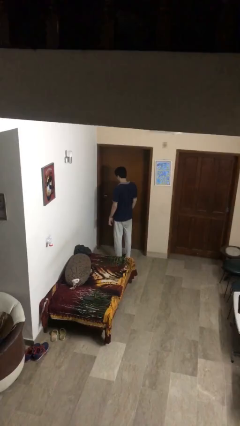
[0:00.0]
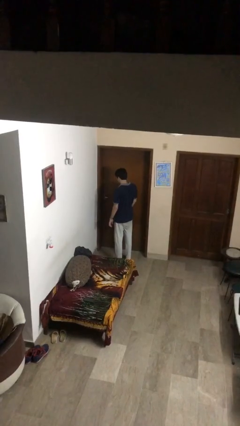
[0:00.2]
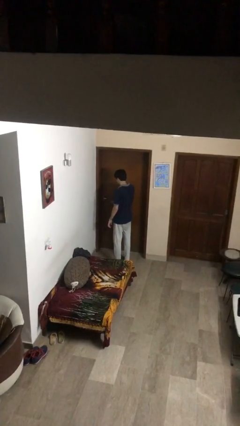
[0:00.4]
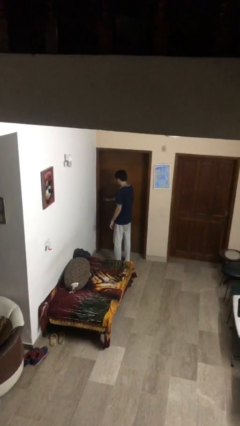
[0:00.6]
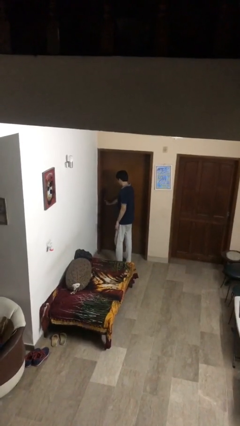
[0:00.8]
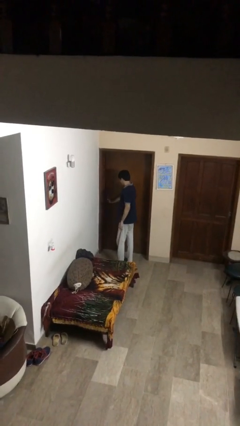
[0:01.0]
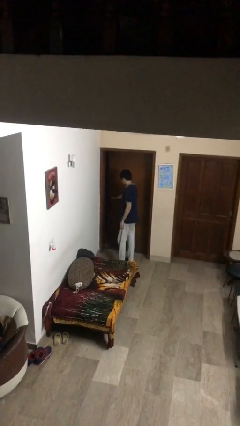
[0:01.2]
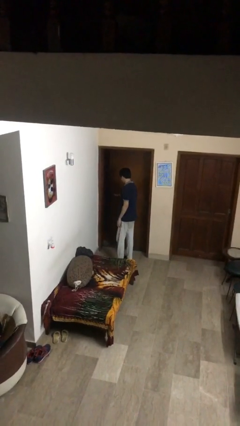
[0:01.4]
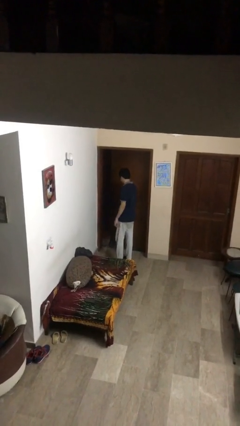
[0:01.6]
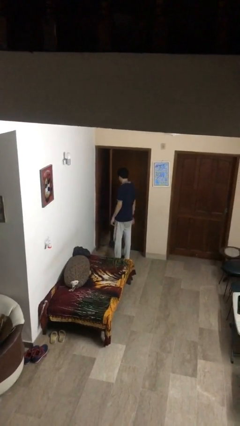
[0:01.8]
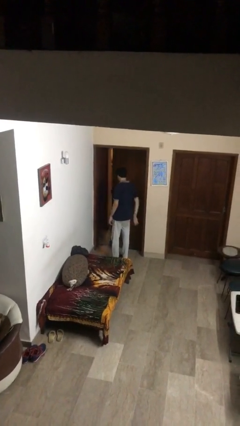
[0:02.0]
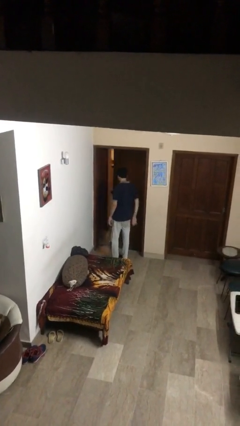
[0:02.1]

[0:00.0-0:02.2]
person opens facility door

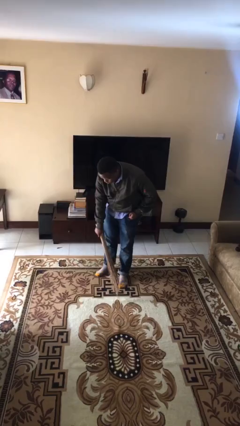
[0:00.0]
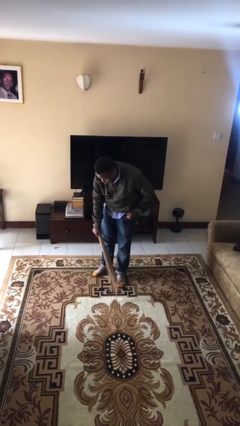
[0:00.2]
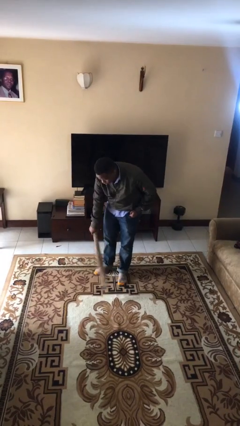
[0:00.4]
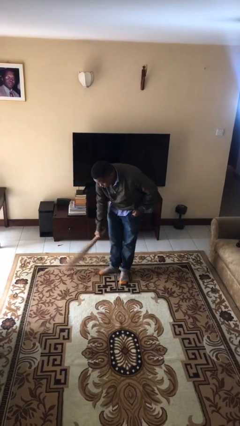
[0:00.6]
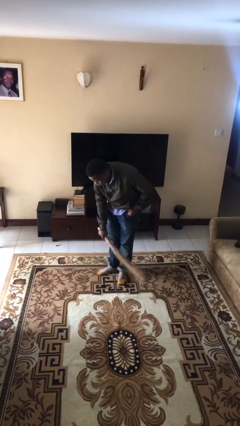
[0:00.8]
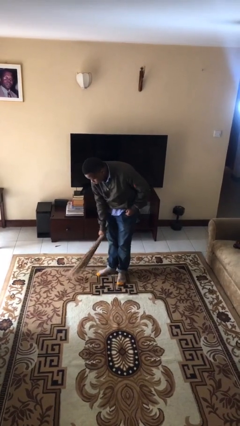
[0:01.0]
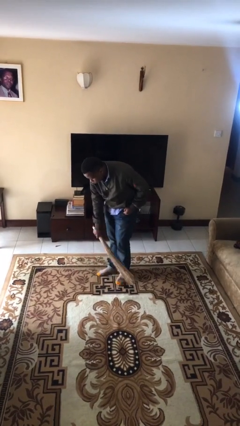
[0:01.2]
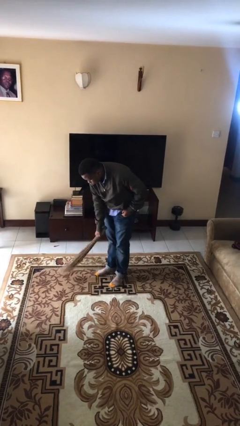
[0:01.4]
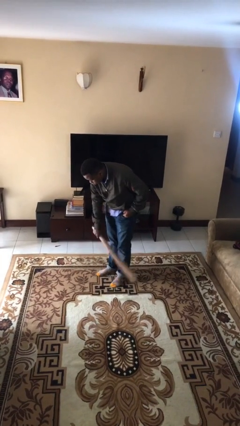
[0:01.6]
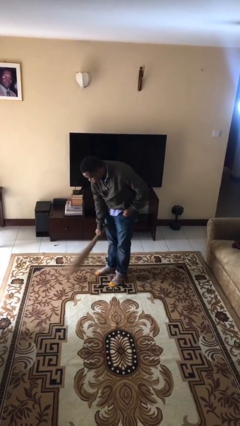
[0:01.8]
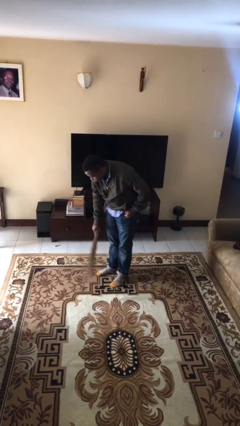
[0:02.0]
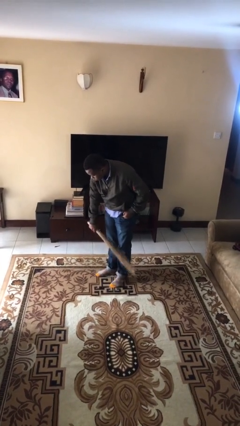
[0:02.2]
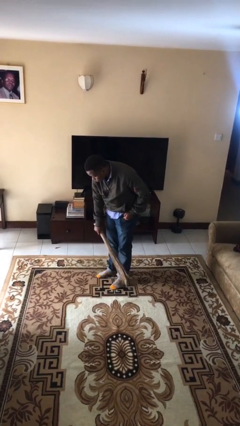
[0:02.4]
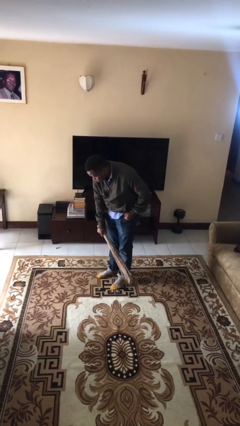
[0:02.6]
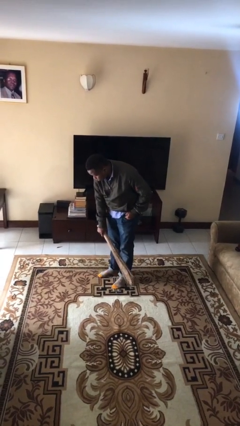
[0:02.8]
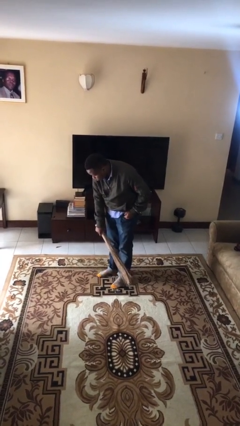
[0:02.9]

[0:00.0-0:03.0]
person sweeps floor

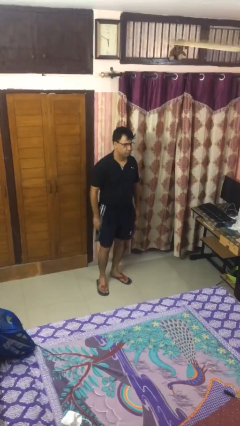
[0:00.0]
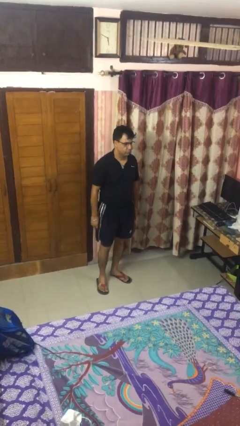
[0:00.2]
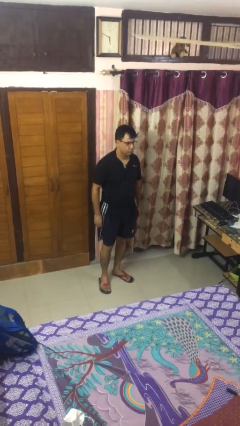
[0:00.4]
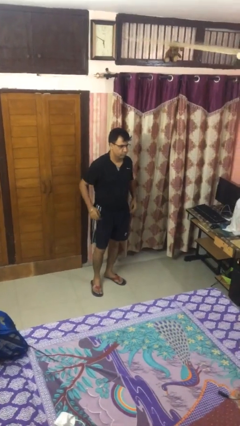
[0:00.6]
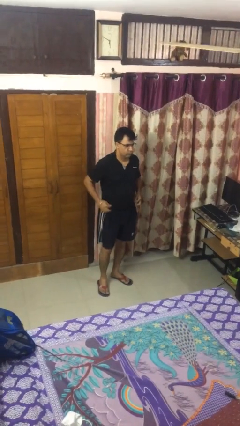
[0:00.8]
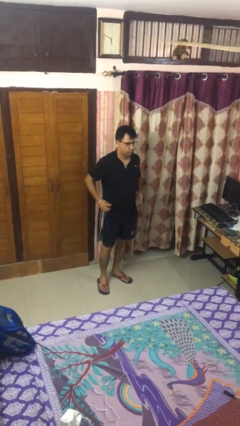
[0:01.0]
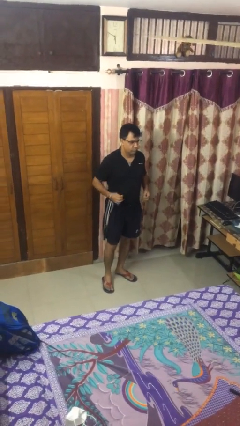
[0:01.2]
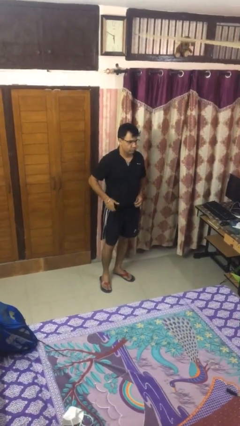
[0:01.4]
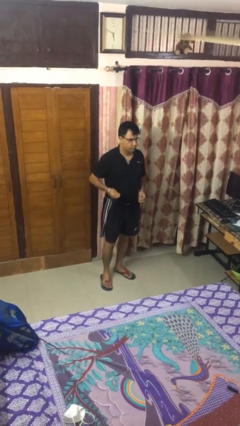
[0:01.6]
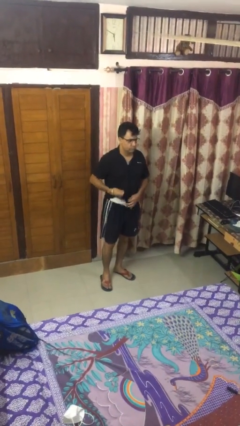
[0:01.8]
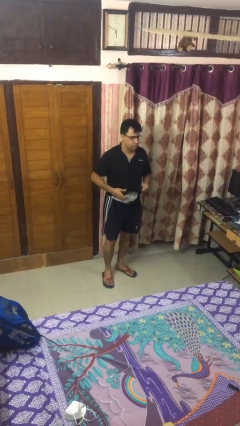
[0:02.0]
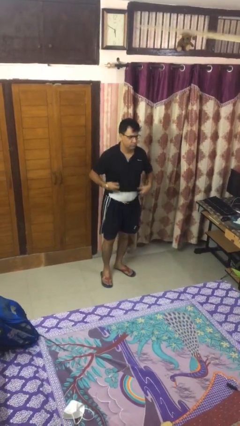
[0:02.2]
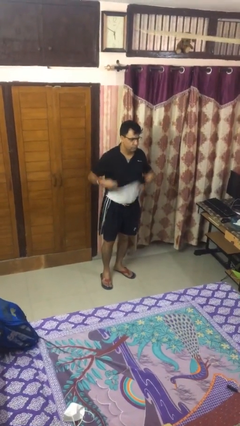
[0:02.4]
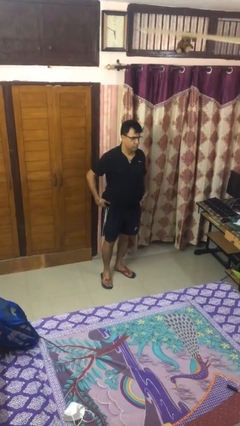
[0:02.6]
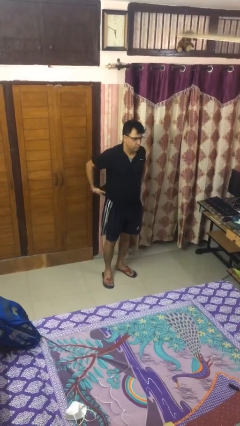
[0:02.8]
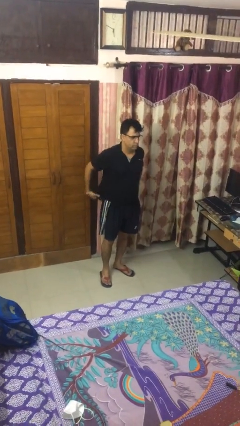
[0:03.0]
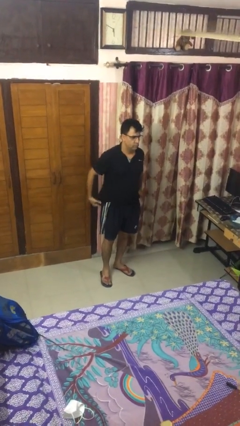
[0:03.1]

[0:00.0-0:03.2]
person untucks shirt

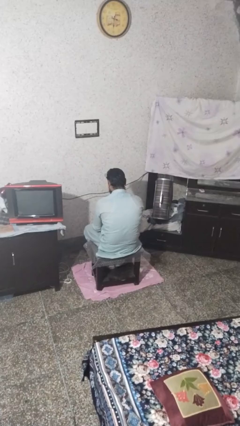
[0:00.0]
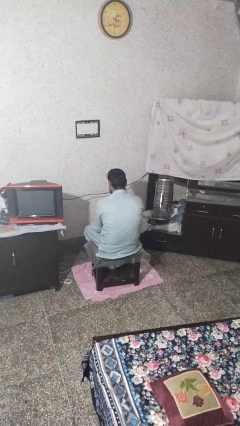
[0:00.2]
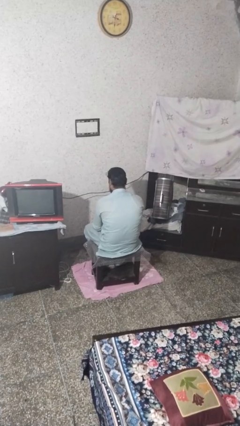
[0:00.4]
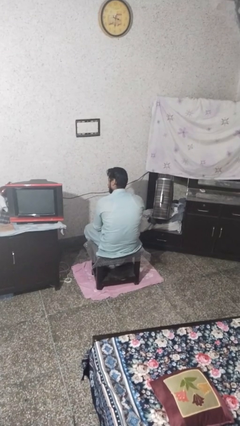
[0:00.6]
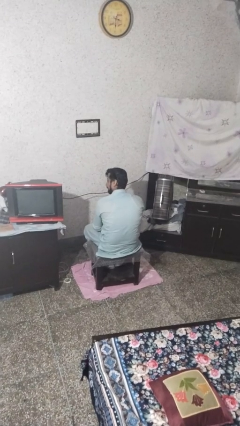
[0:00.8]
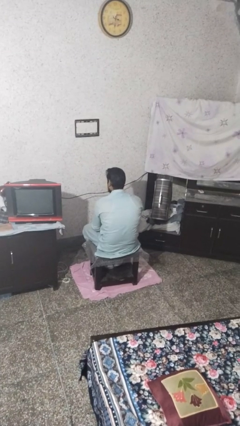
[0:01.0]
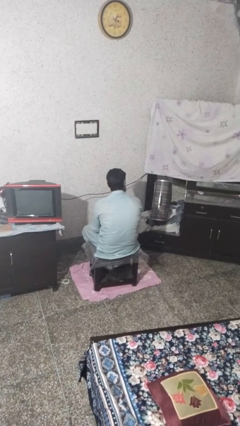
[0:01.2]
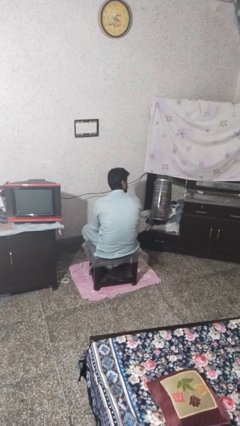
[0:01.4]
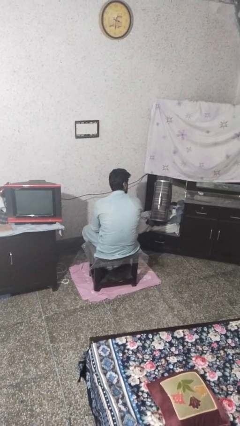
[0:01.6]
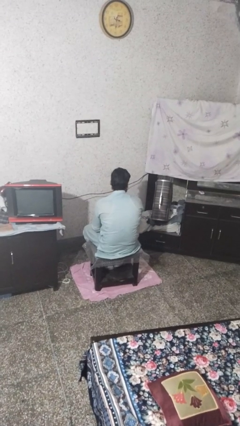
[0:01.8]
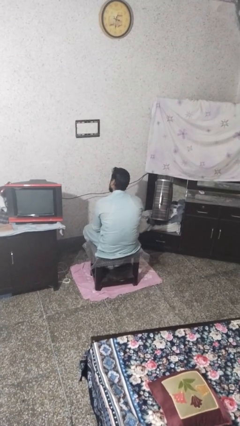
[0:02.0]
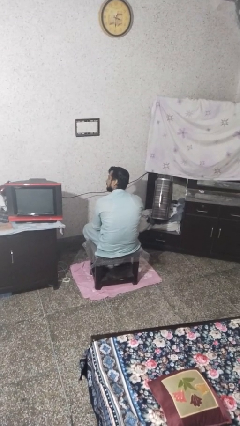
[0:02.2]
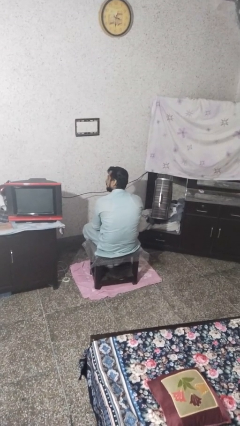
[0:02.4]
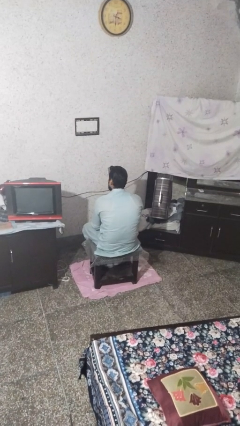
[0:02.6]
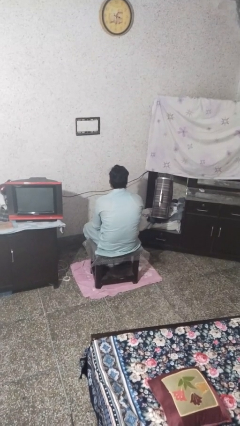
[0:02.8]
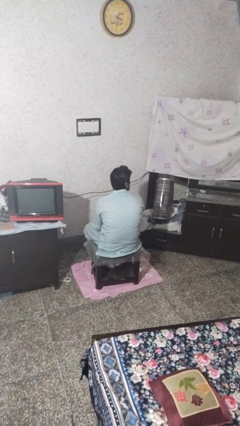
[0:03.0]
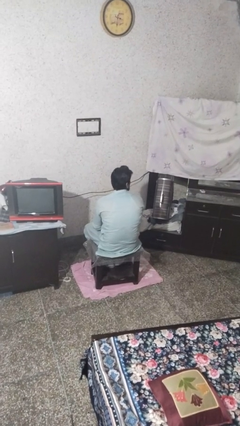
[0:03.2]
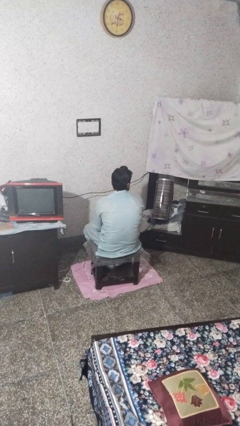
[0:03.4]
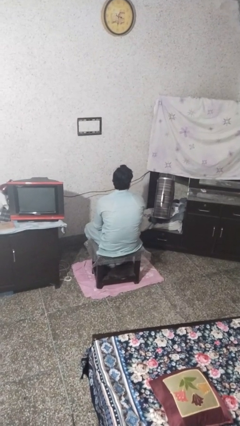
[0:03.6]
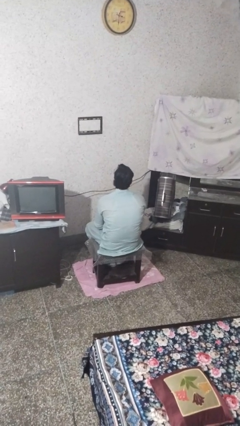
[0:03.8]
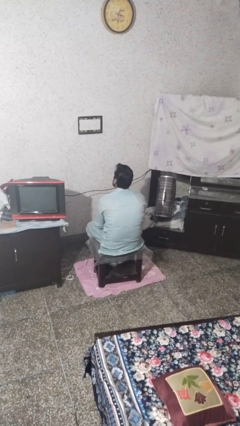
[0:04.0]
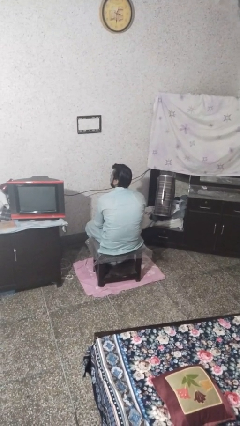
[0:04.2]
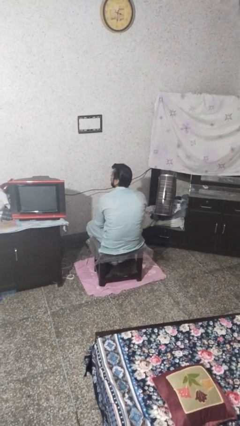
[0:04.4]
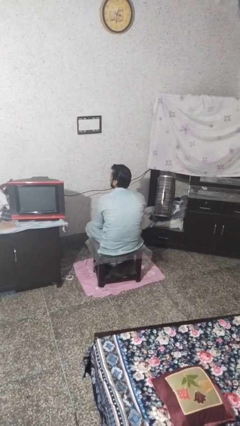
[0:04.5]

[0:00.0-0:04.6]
person shakes head

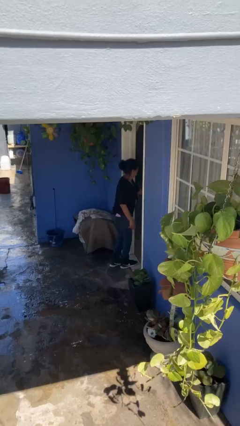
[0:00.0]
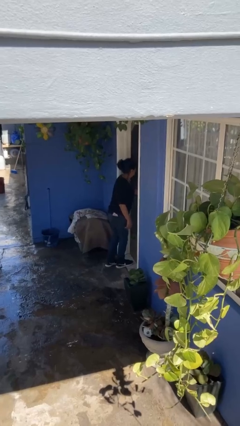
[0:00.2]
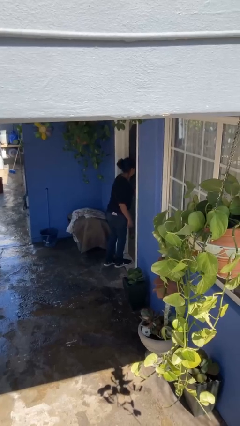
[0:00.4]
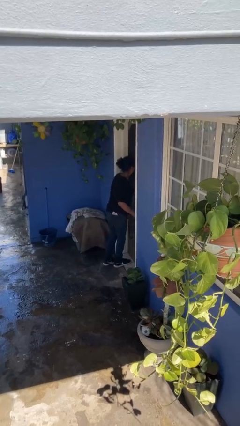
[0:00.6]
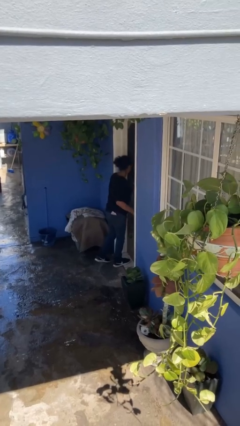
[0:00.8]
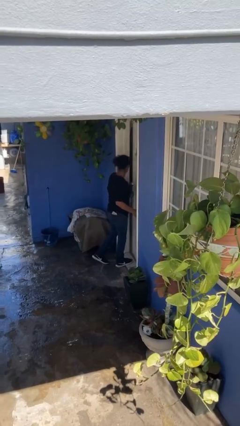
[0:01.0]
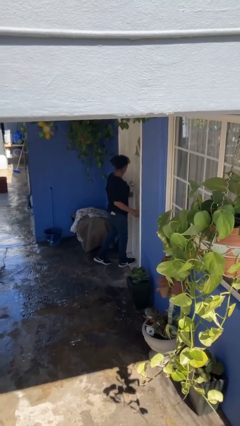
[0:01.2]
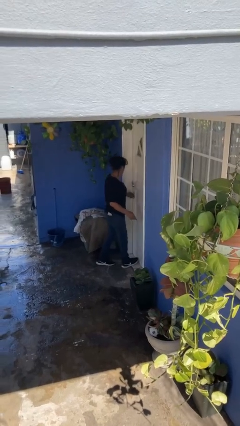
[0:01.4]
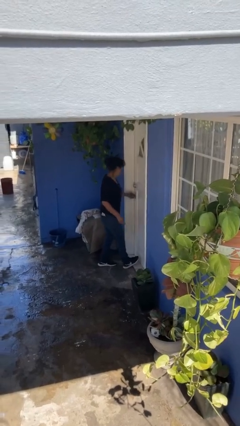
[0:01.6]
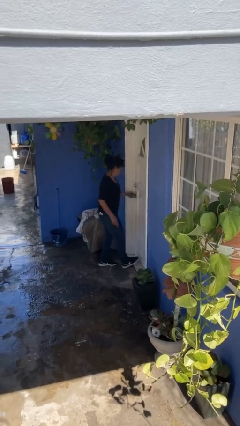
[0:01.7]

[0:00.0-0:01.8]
person closes facility door

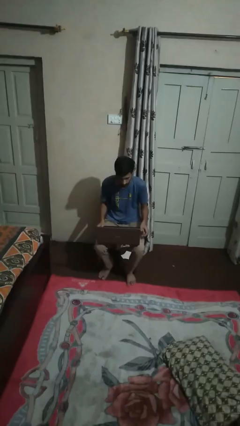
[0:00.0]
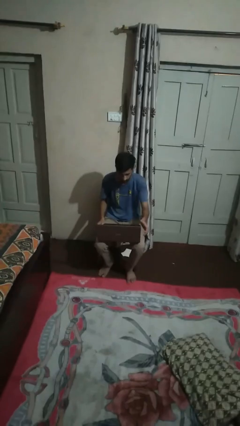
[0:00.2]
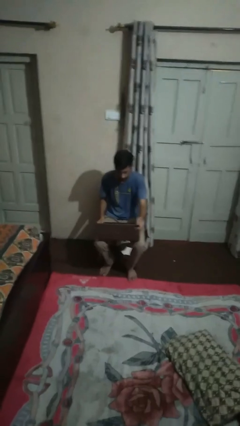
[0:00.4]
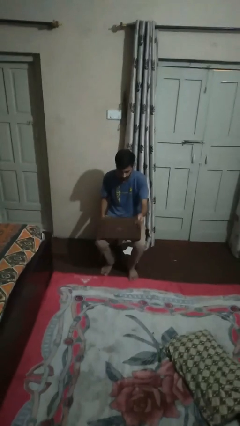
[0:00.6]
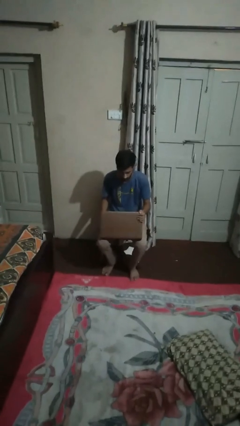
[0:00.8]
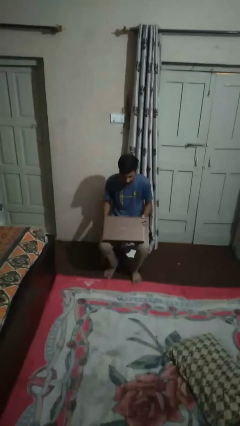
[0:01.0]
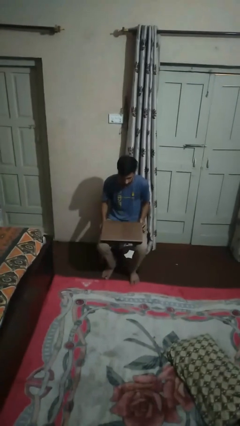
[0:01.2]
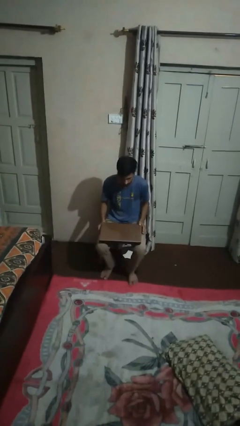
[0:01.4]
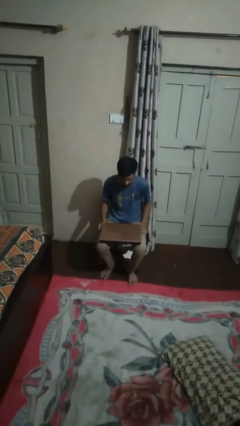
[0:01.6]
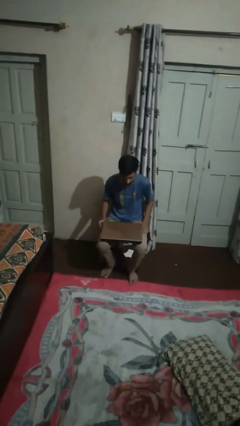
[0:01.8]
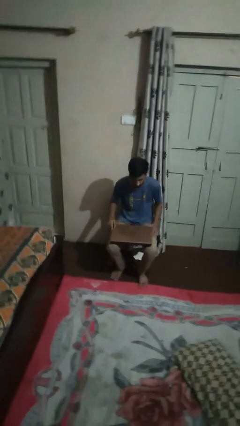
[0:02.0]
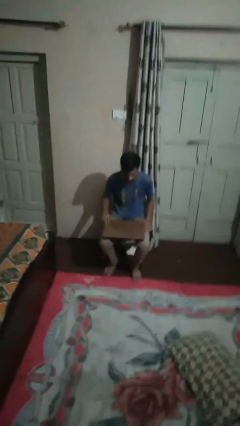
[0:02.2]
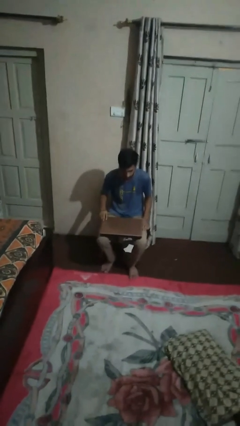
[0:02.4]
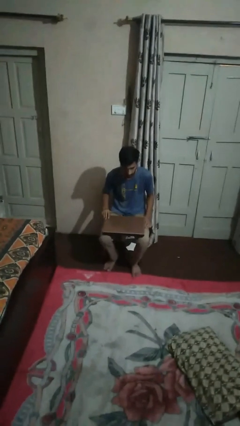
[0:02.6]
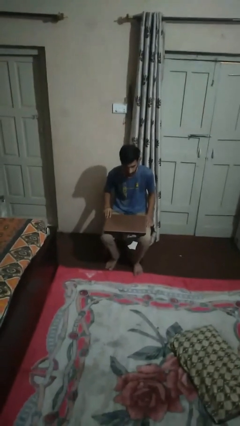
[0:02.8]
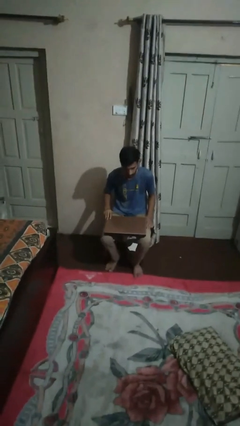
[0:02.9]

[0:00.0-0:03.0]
person closes laptop
